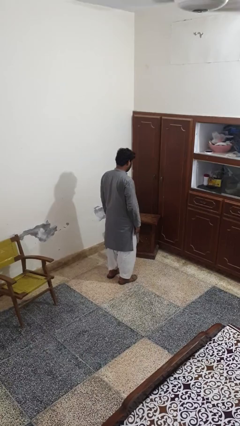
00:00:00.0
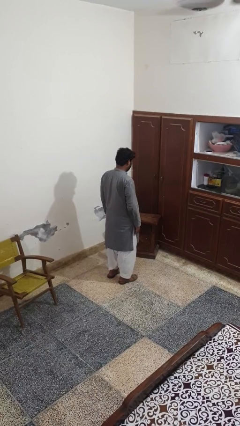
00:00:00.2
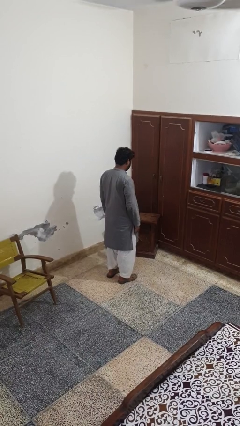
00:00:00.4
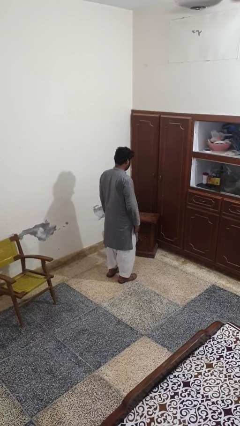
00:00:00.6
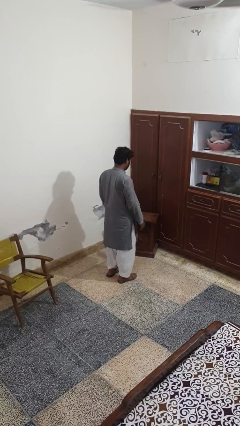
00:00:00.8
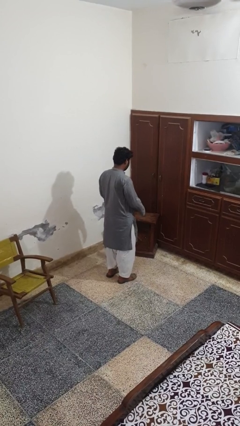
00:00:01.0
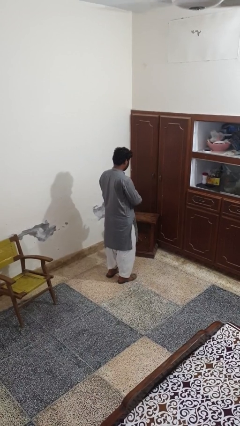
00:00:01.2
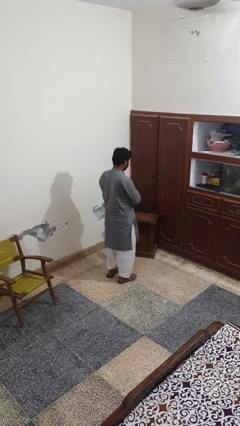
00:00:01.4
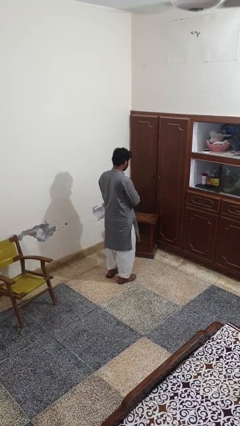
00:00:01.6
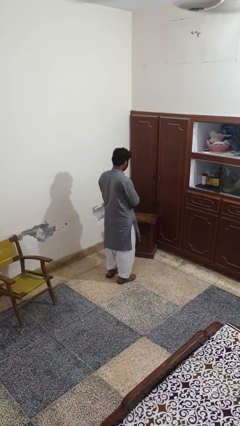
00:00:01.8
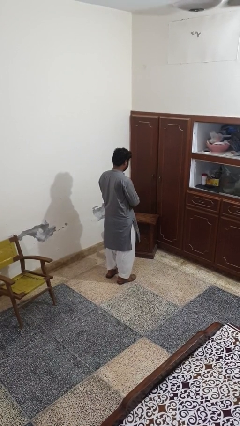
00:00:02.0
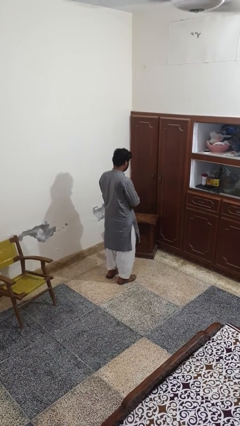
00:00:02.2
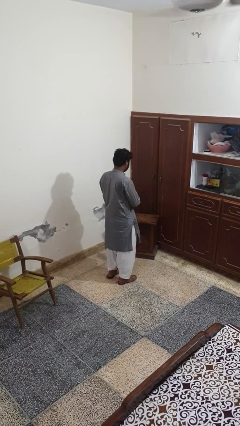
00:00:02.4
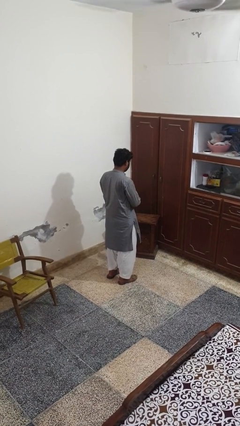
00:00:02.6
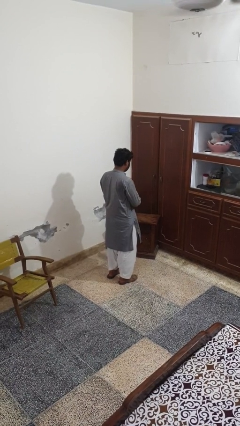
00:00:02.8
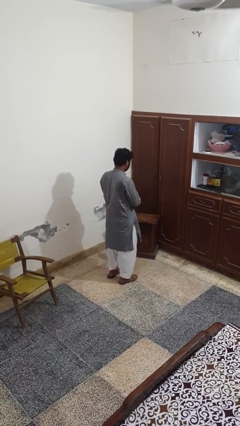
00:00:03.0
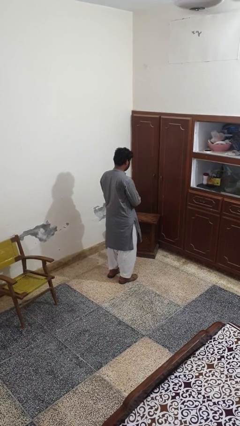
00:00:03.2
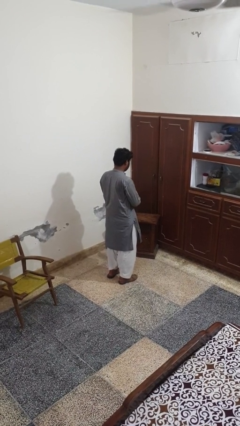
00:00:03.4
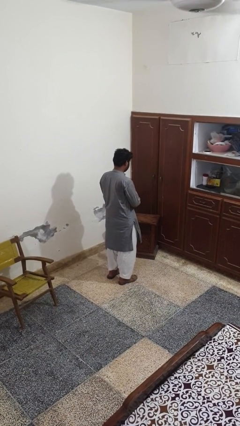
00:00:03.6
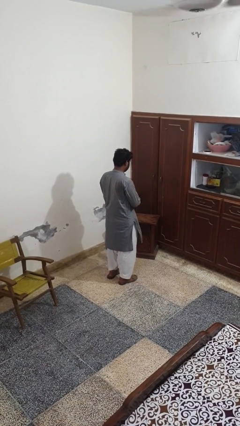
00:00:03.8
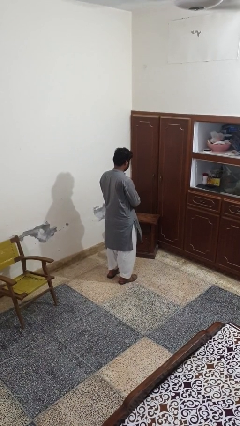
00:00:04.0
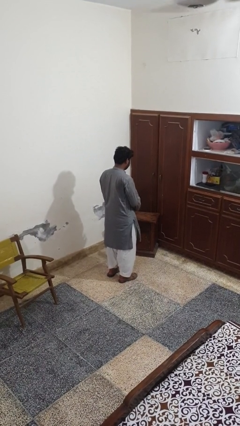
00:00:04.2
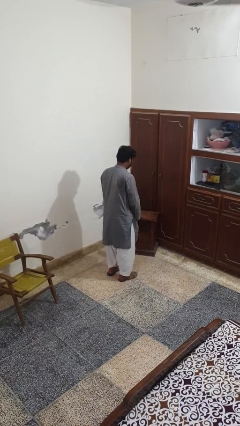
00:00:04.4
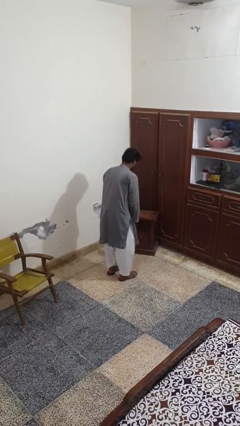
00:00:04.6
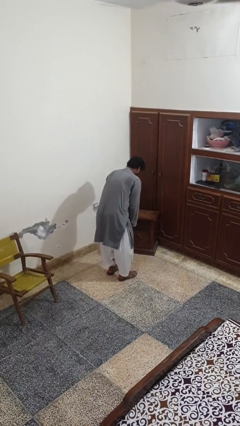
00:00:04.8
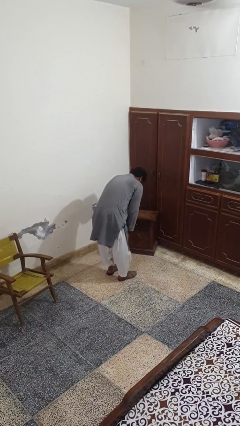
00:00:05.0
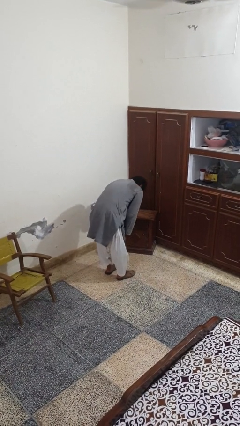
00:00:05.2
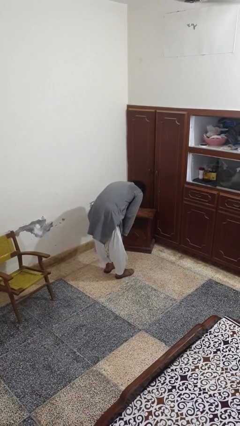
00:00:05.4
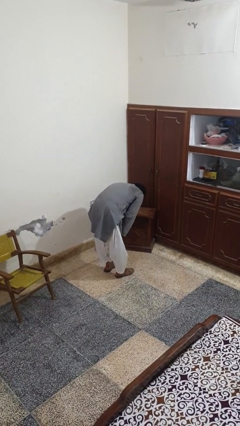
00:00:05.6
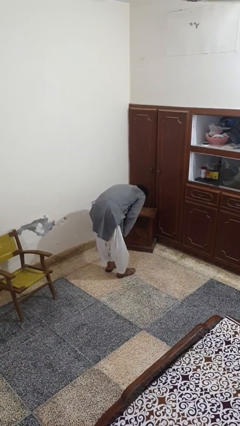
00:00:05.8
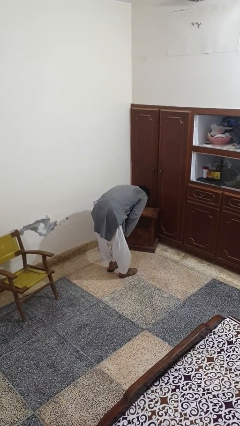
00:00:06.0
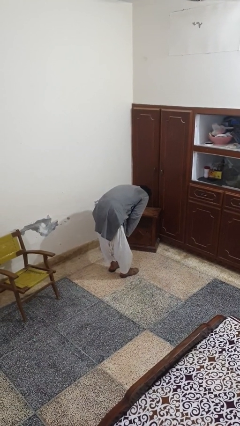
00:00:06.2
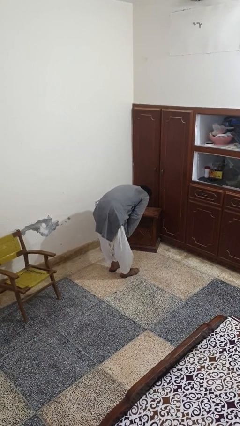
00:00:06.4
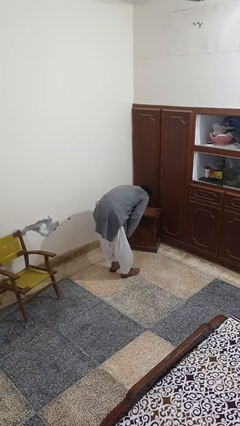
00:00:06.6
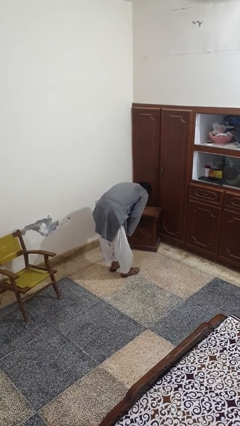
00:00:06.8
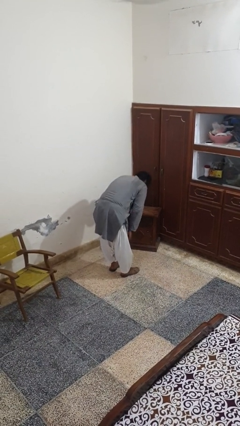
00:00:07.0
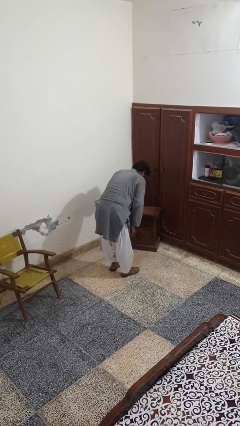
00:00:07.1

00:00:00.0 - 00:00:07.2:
person prays

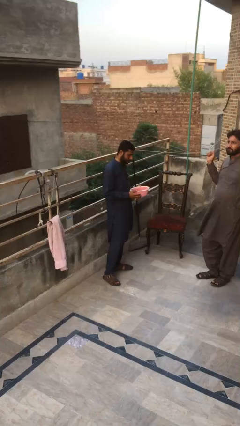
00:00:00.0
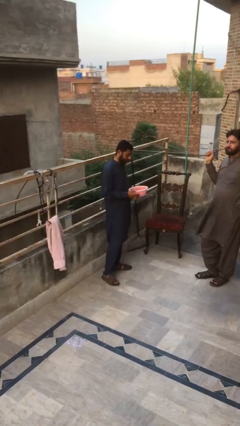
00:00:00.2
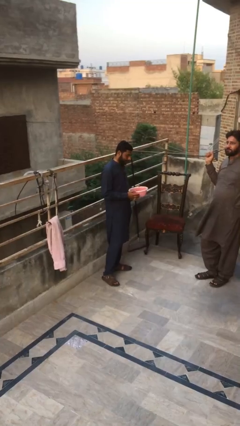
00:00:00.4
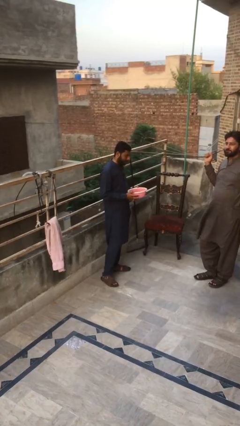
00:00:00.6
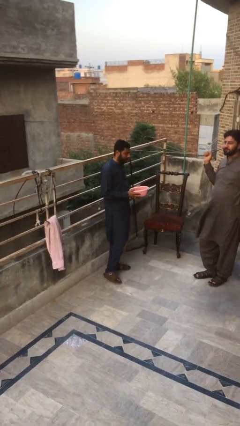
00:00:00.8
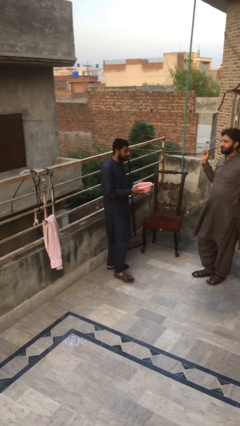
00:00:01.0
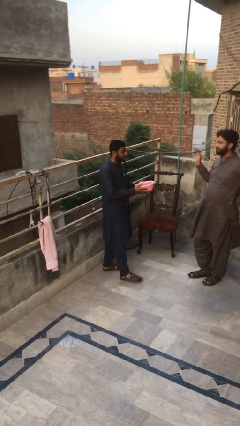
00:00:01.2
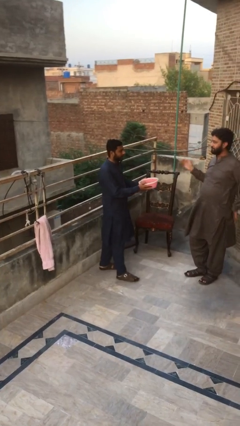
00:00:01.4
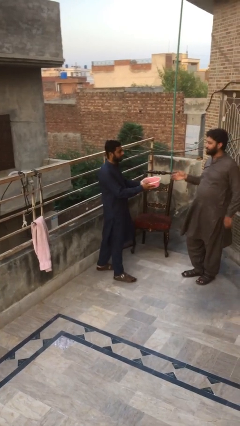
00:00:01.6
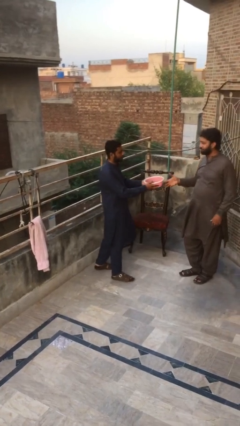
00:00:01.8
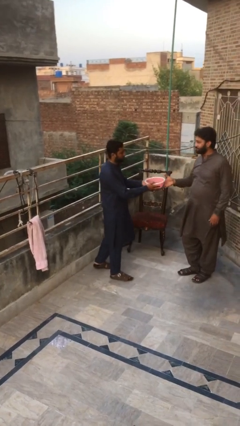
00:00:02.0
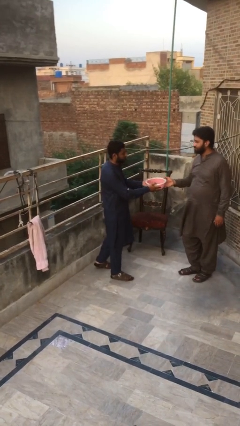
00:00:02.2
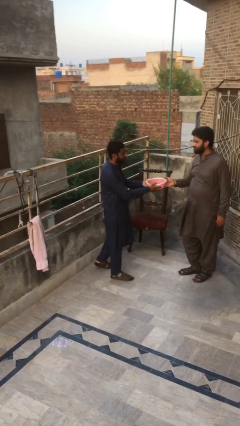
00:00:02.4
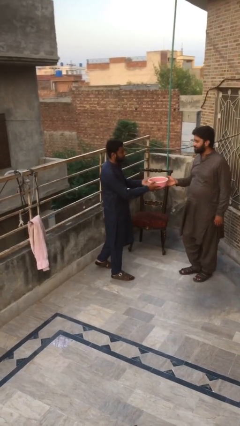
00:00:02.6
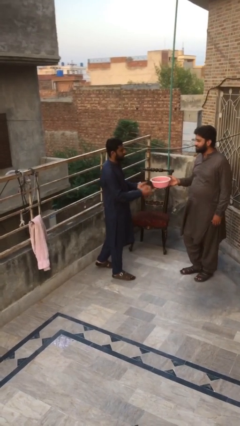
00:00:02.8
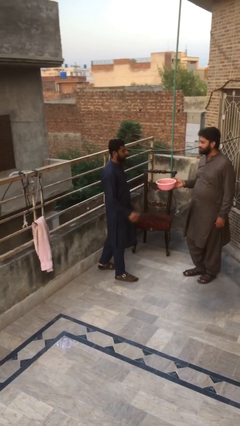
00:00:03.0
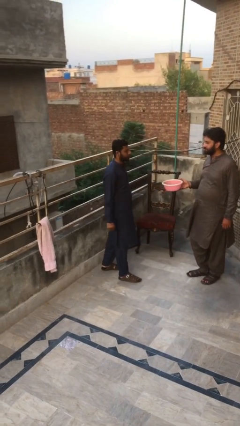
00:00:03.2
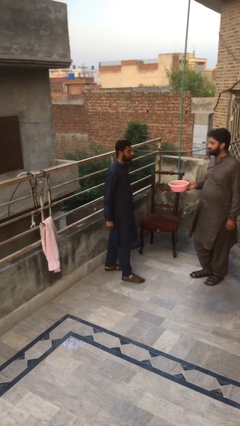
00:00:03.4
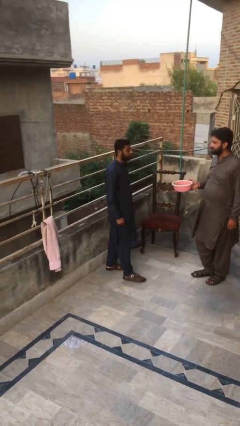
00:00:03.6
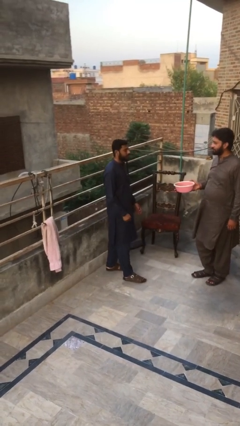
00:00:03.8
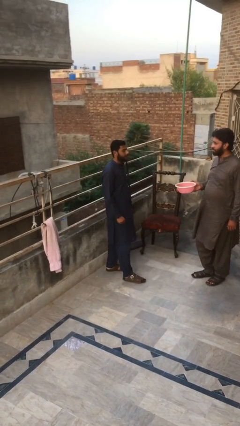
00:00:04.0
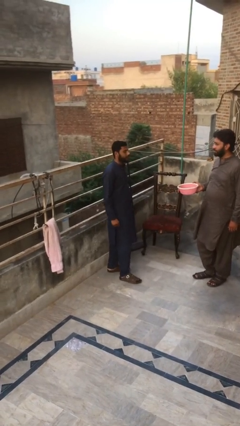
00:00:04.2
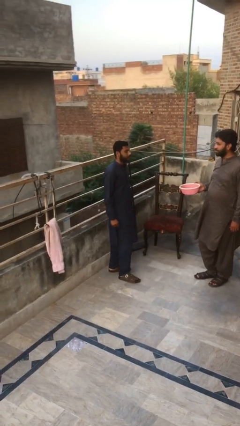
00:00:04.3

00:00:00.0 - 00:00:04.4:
person transfers object to person

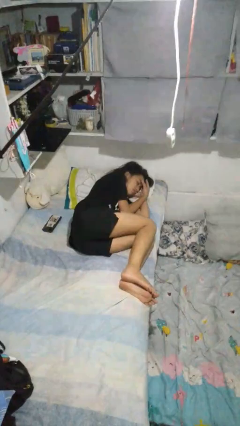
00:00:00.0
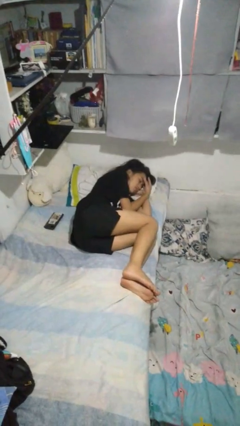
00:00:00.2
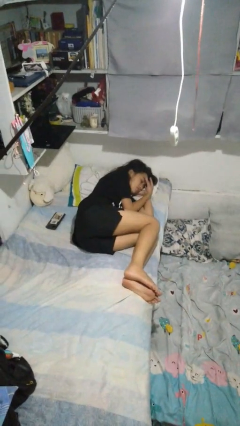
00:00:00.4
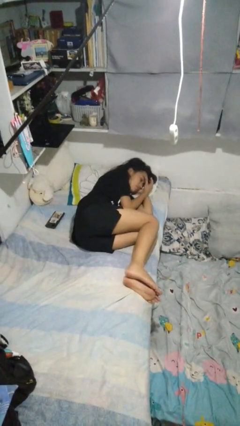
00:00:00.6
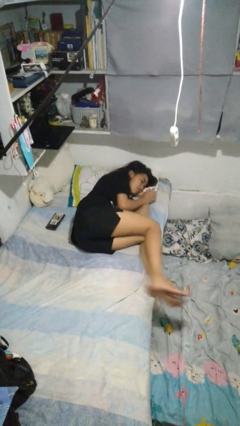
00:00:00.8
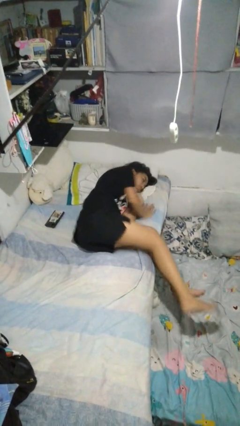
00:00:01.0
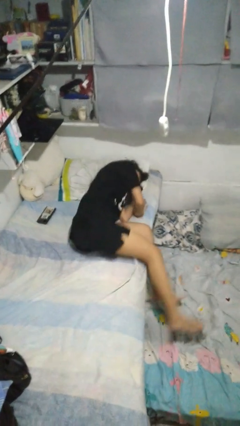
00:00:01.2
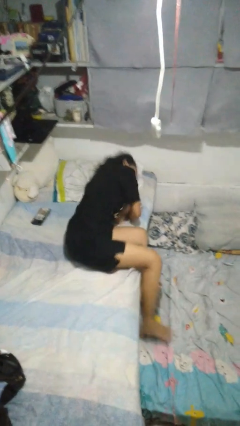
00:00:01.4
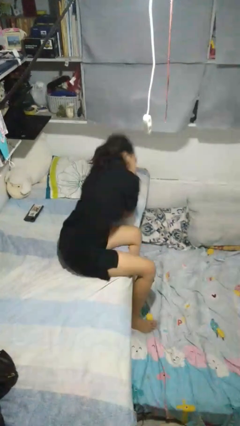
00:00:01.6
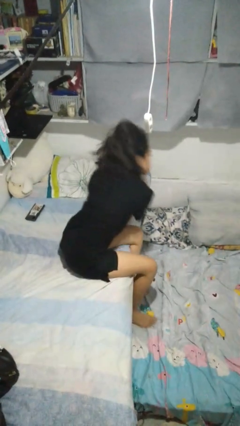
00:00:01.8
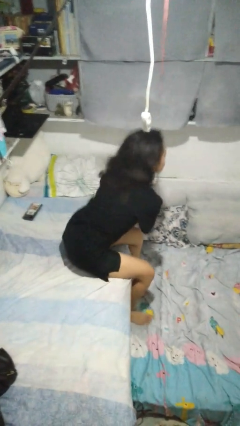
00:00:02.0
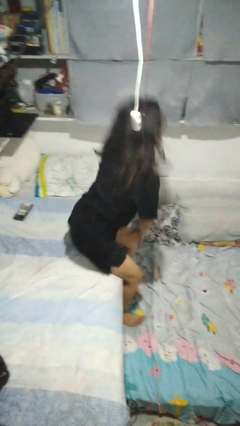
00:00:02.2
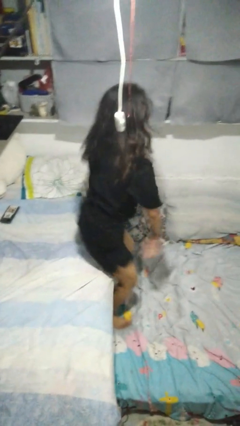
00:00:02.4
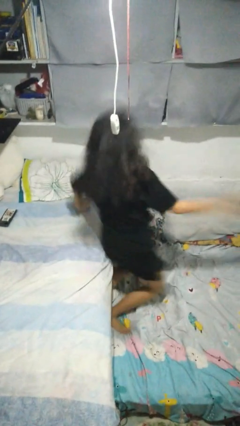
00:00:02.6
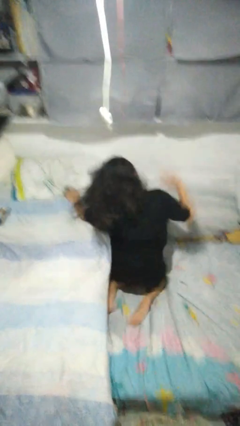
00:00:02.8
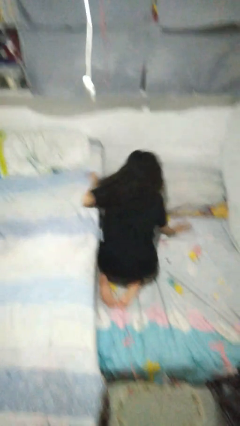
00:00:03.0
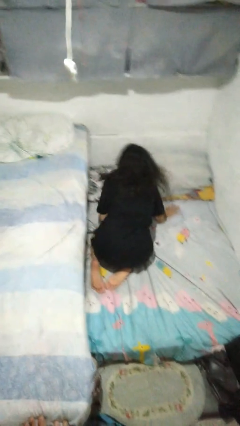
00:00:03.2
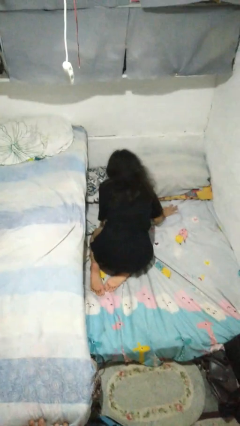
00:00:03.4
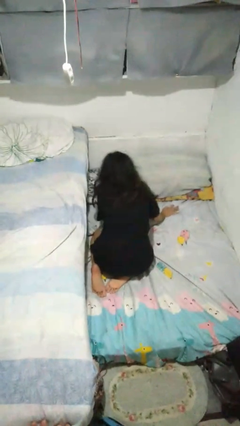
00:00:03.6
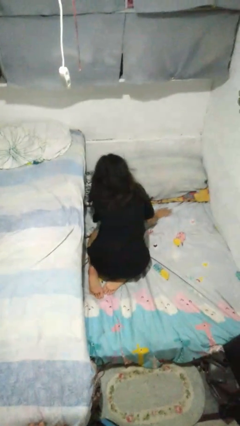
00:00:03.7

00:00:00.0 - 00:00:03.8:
person falls from bed

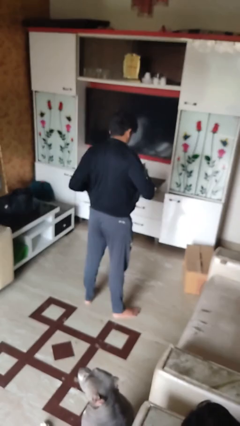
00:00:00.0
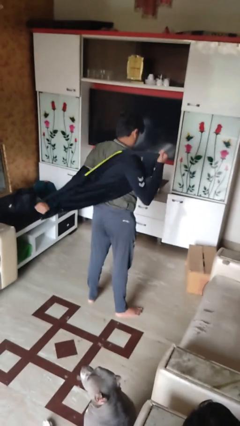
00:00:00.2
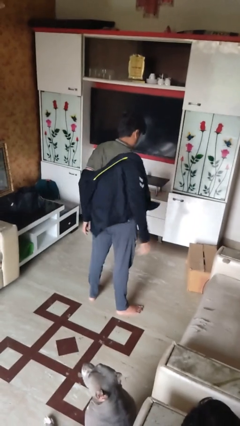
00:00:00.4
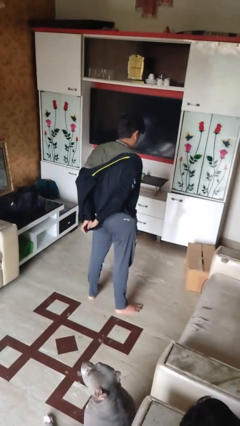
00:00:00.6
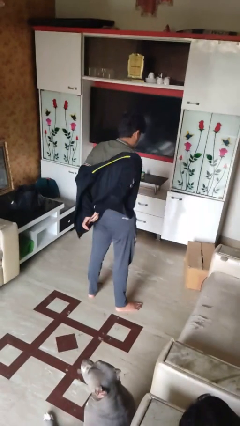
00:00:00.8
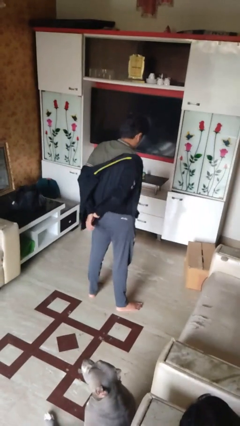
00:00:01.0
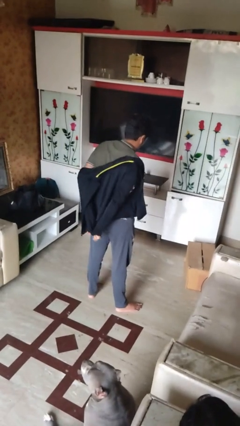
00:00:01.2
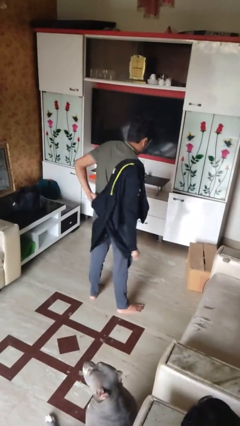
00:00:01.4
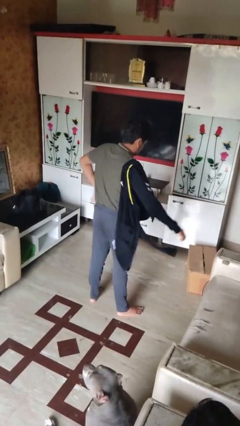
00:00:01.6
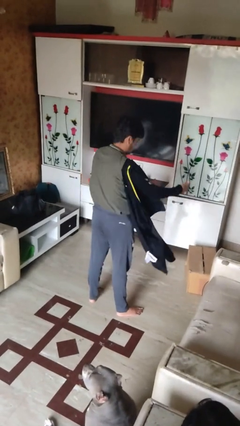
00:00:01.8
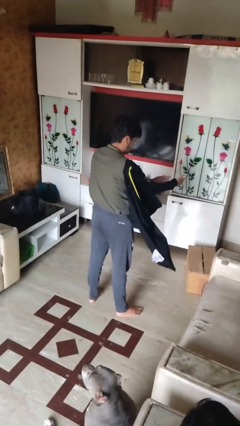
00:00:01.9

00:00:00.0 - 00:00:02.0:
person takes off jacket

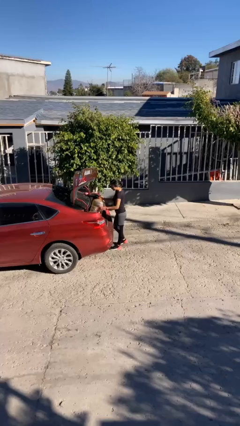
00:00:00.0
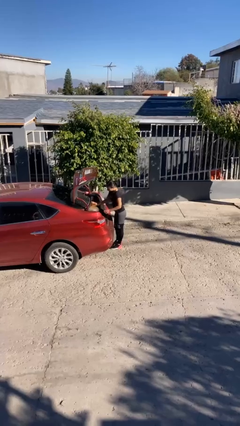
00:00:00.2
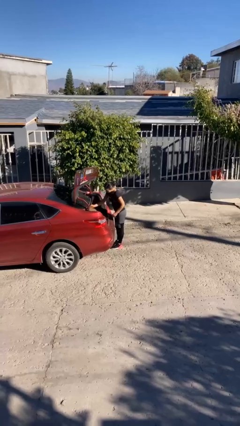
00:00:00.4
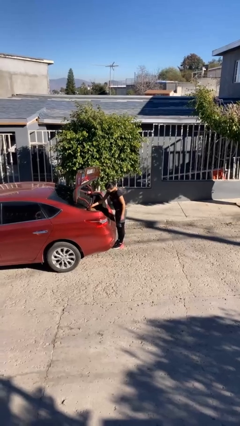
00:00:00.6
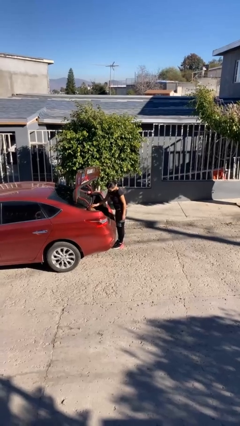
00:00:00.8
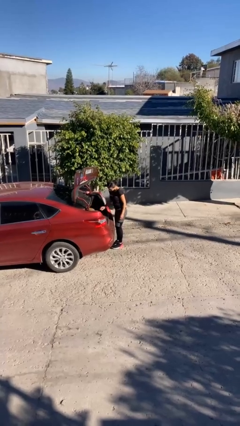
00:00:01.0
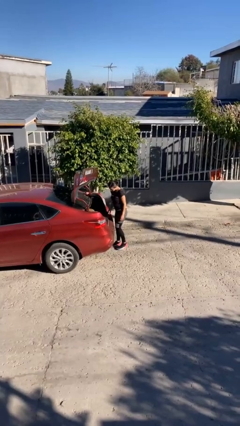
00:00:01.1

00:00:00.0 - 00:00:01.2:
person loads car
